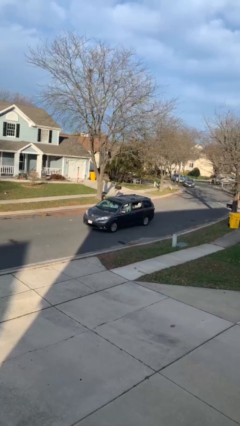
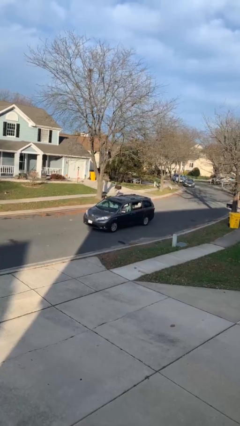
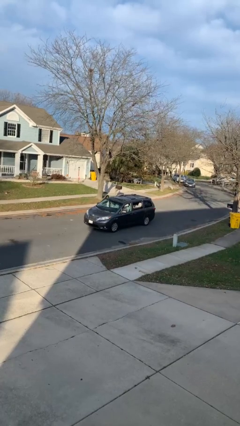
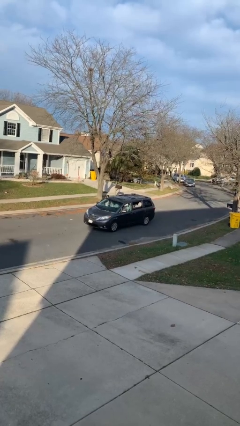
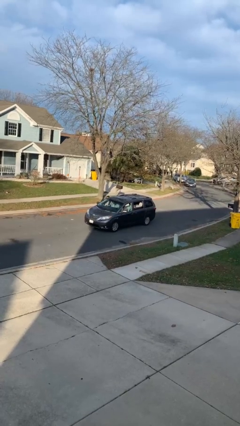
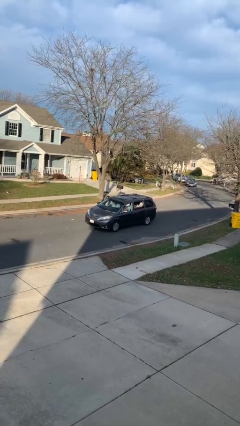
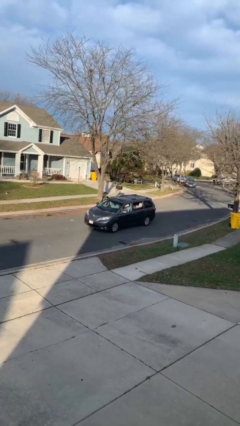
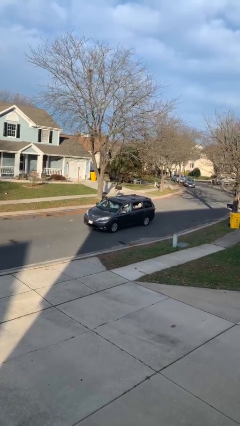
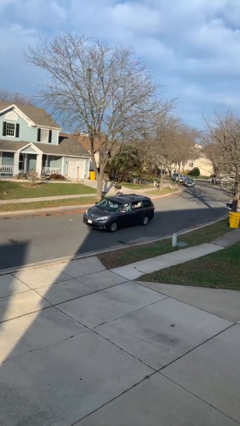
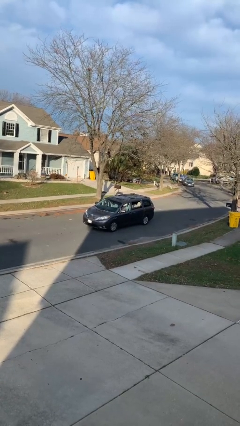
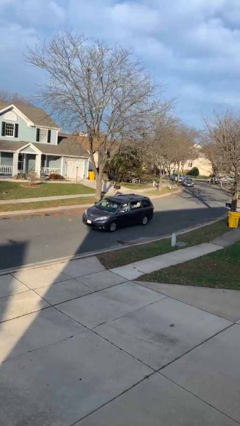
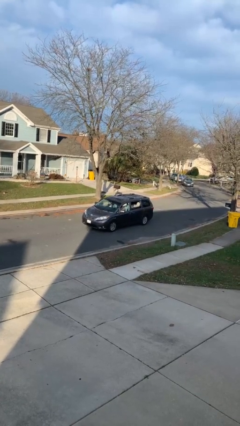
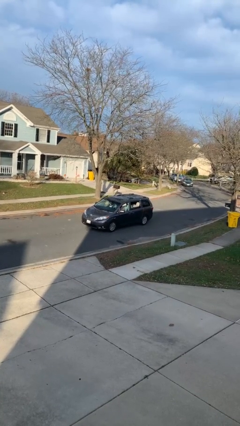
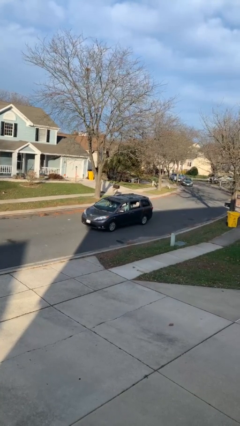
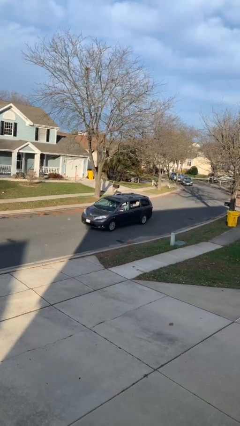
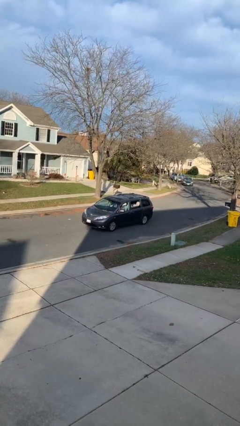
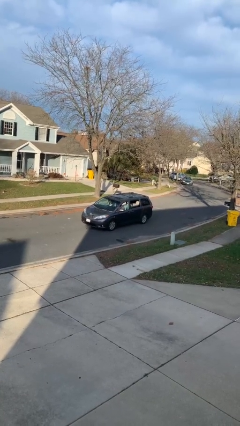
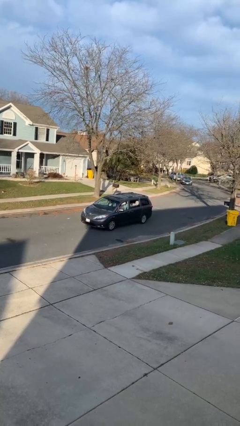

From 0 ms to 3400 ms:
car picks up person

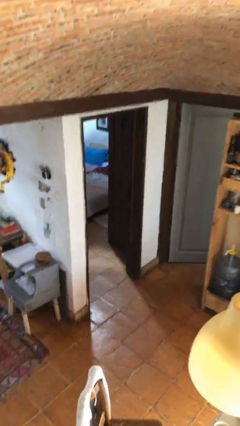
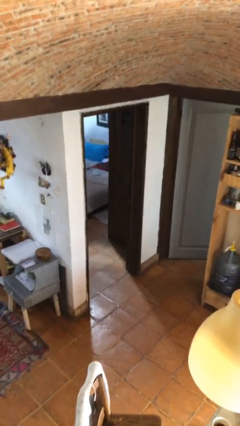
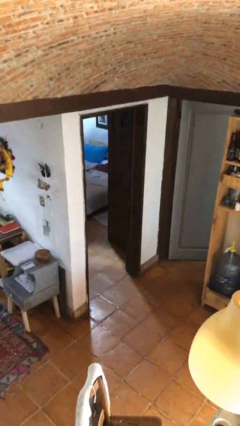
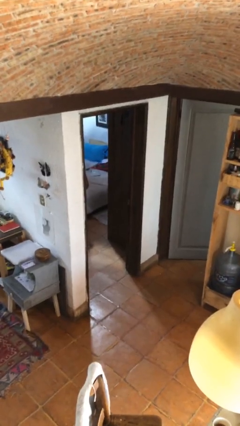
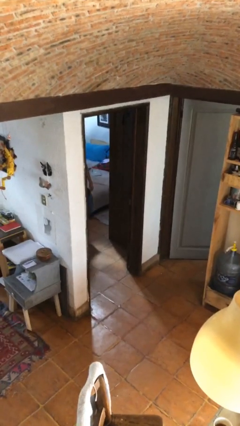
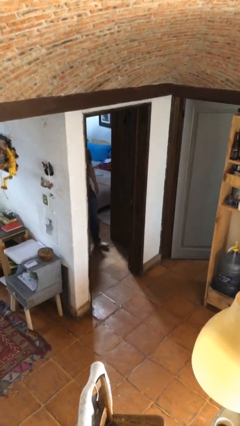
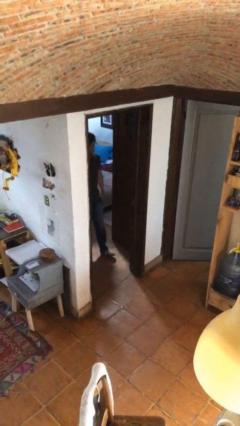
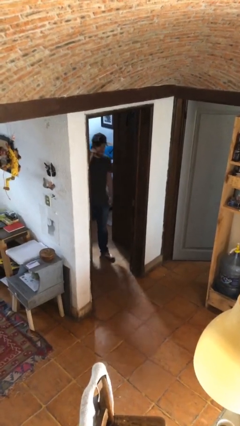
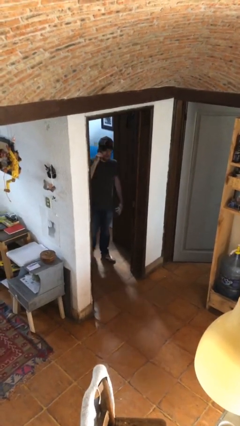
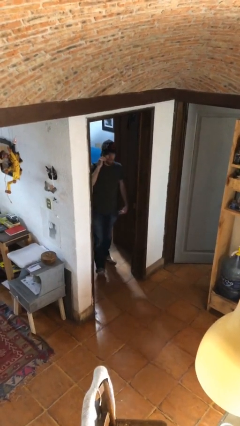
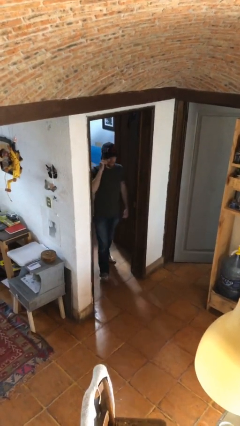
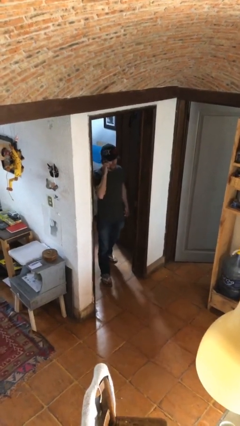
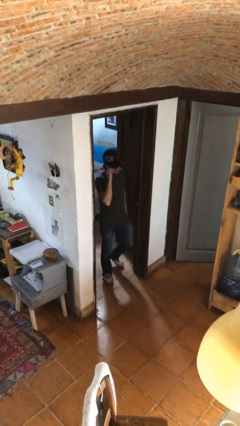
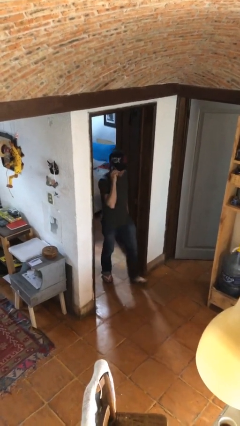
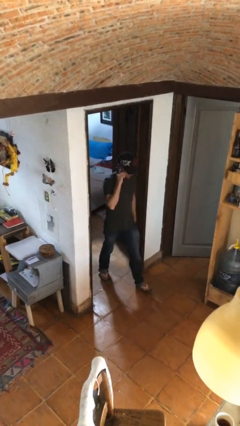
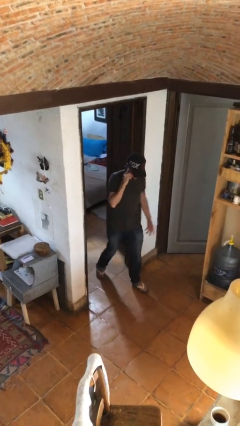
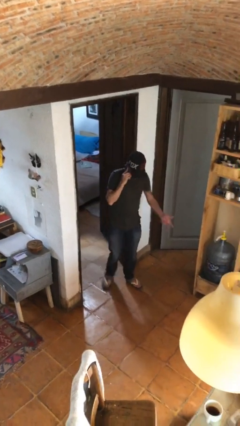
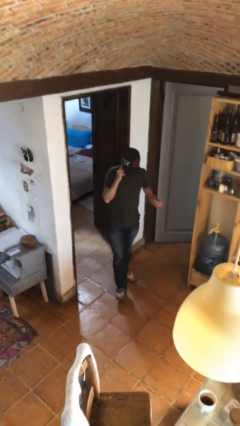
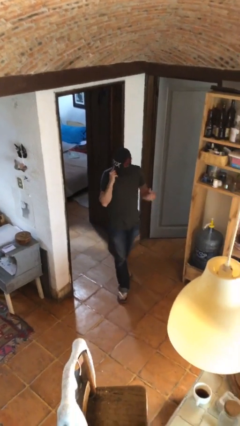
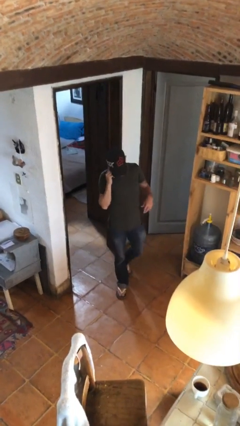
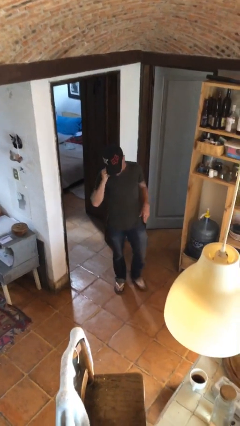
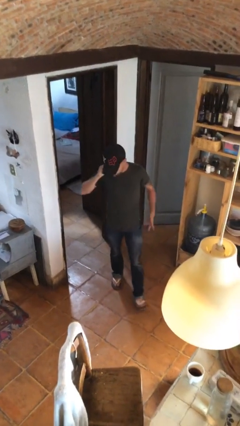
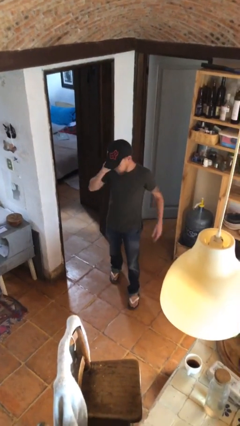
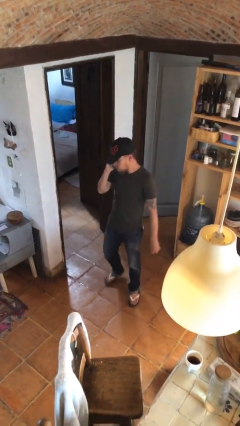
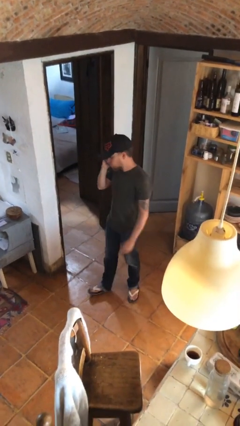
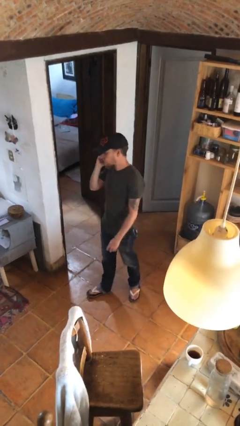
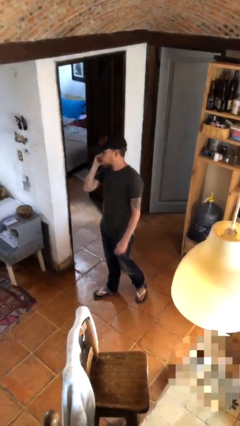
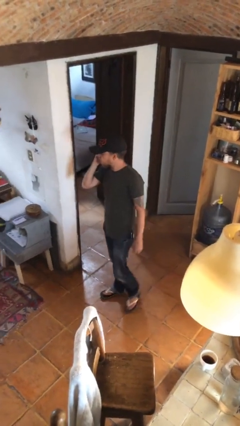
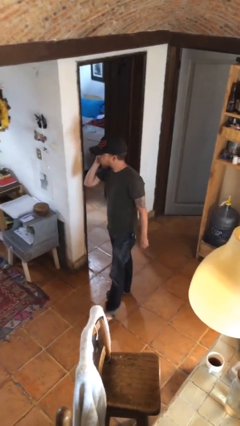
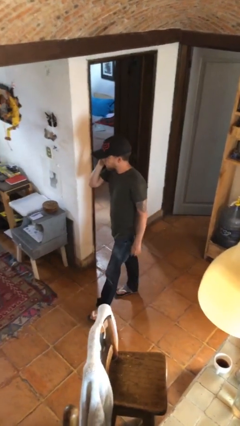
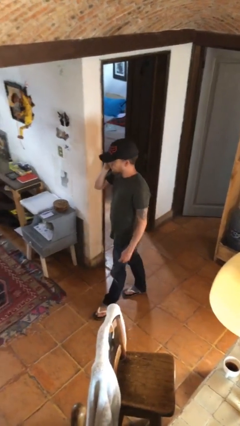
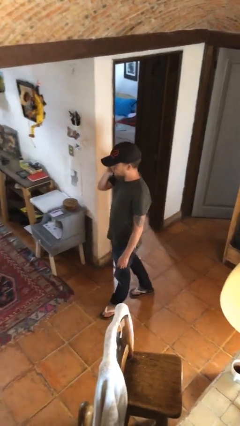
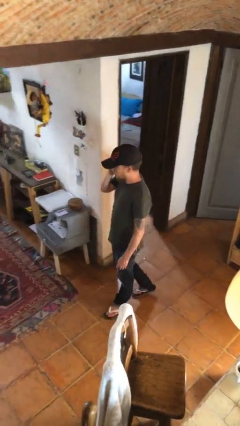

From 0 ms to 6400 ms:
person enters scene through structure

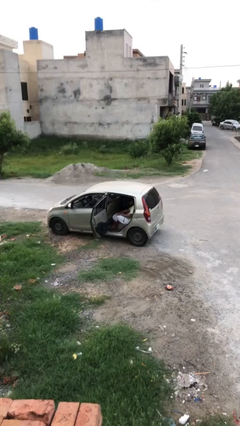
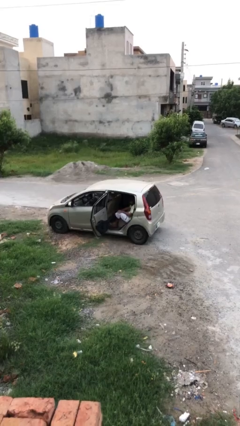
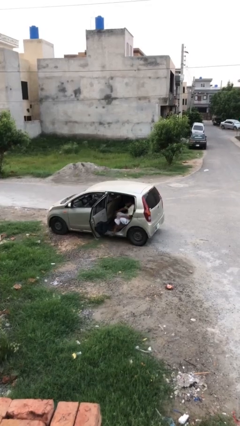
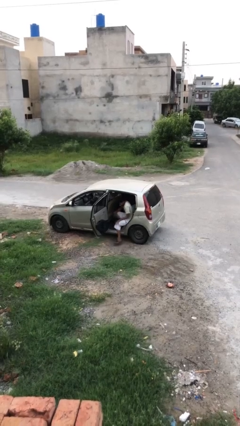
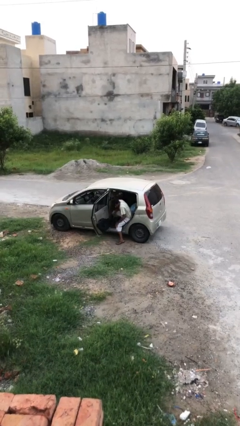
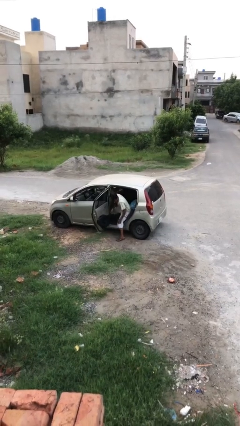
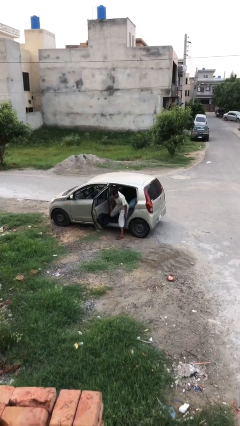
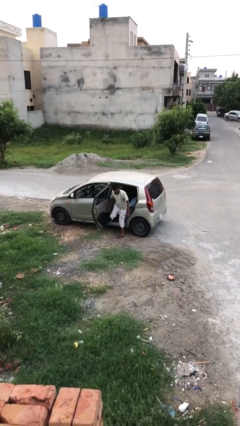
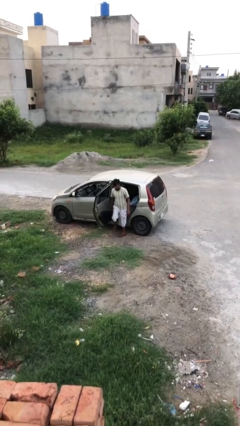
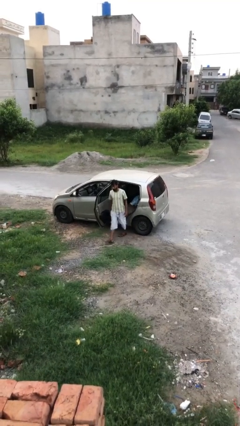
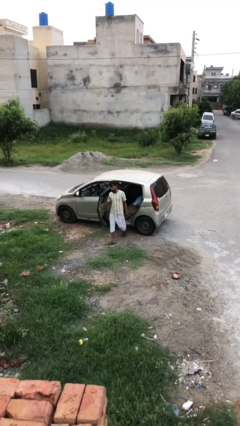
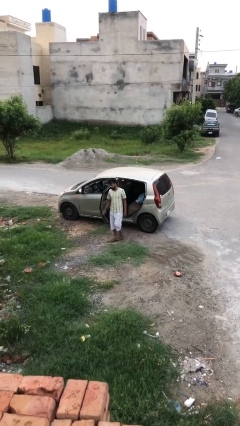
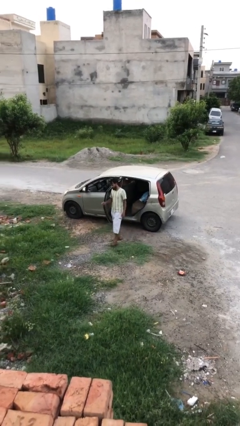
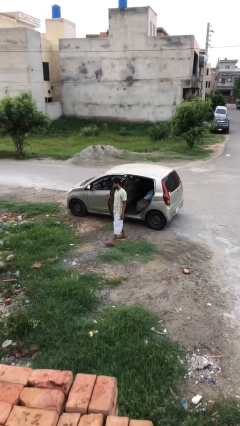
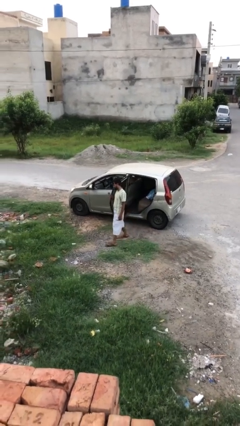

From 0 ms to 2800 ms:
person exits car

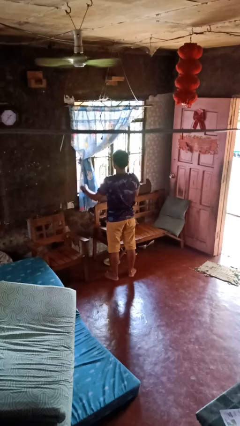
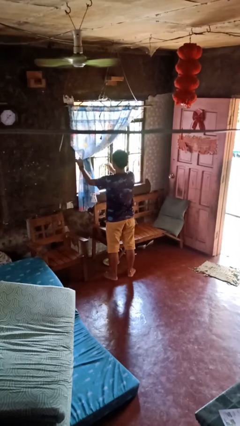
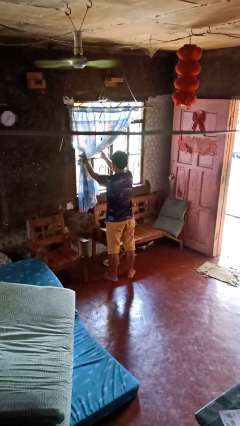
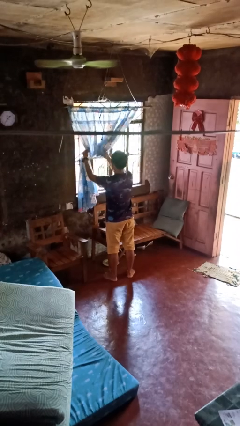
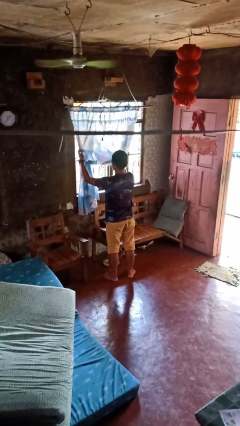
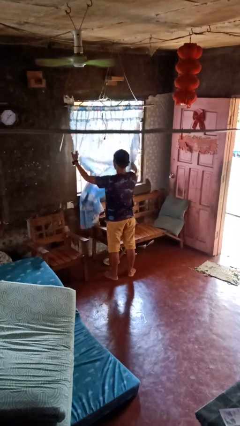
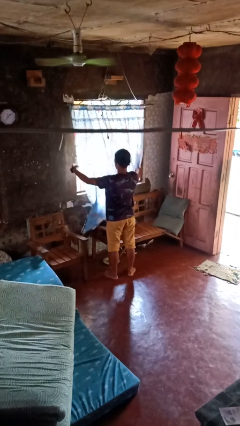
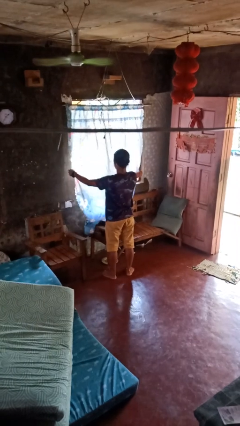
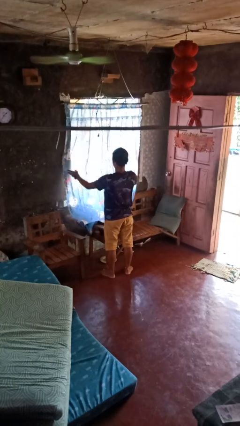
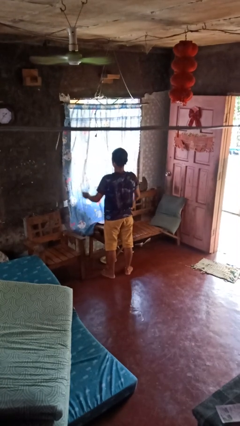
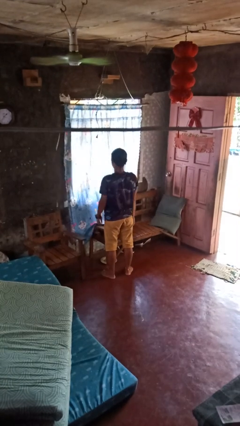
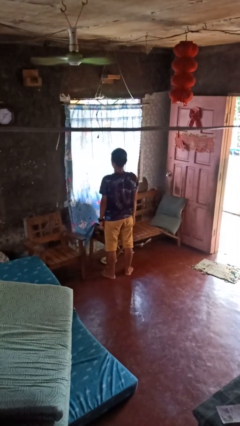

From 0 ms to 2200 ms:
person closes curtains

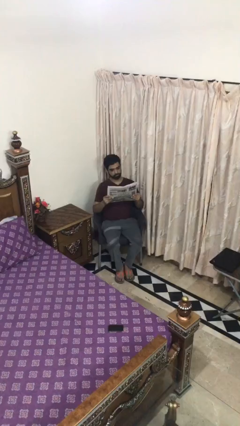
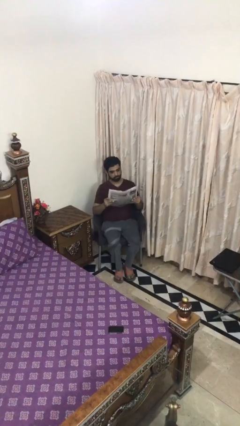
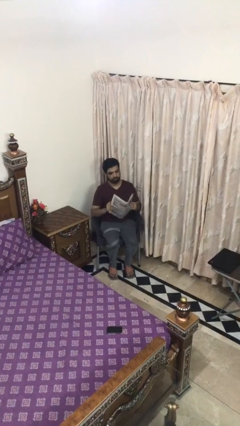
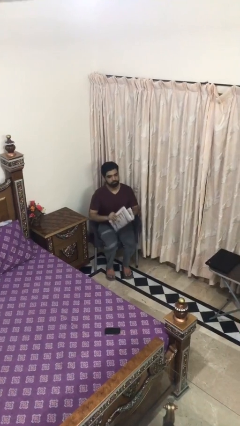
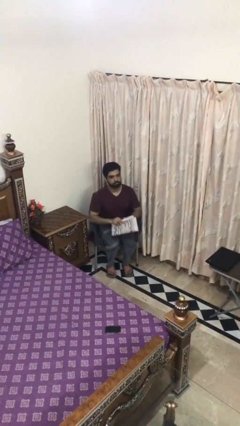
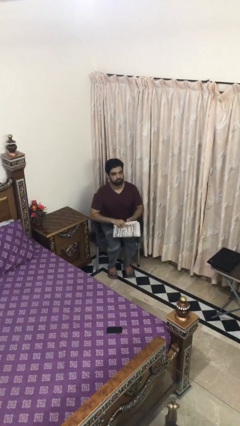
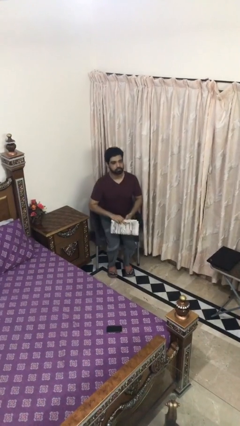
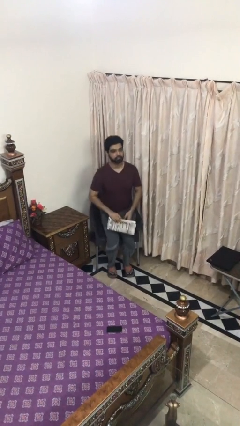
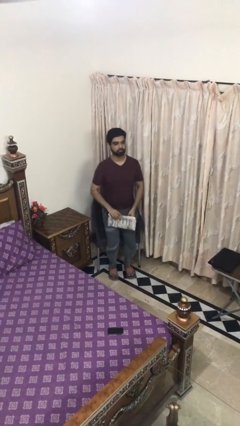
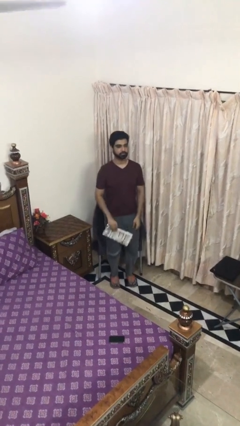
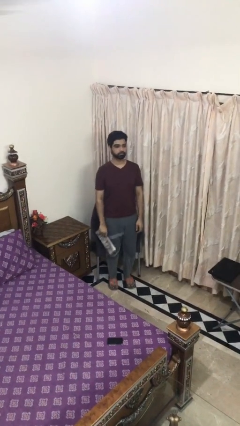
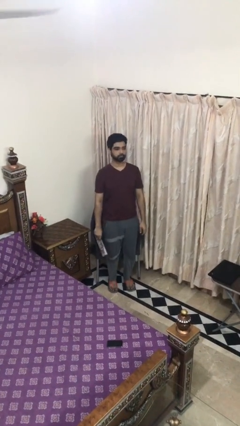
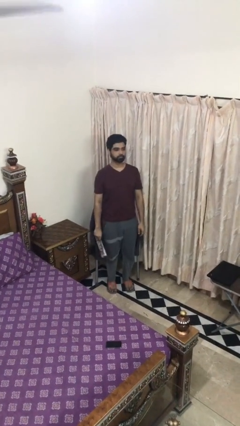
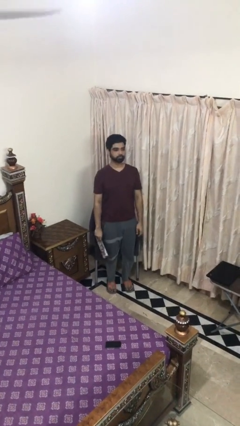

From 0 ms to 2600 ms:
person stands up

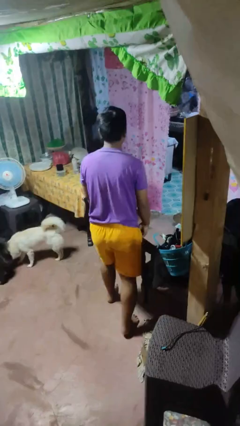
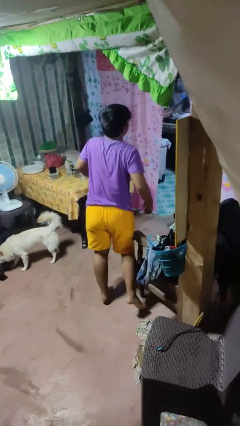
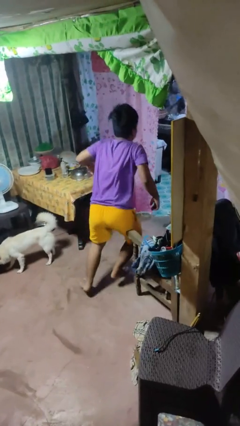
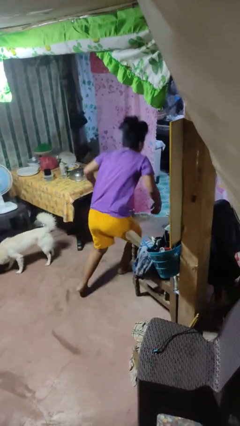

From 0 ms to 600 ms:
person trips on object on floor
